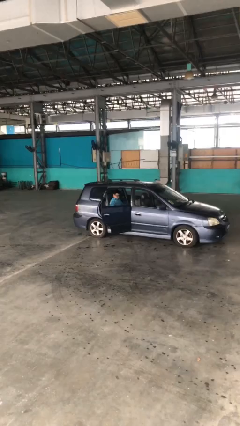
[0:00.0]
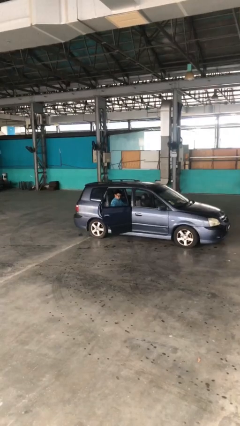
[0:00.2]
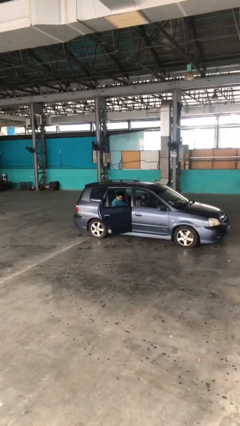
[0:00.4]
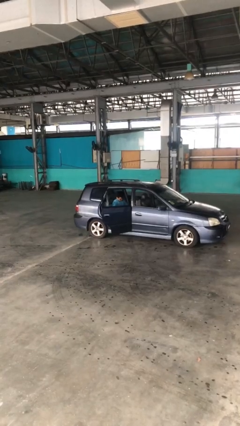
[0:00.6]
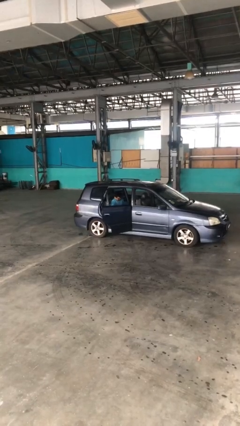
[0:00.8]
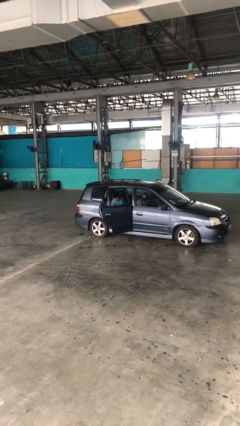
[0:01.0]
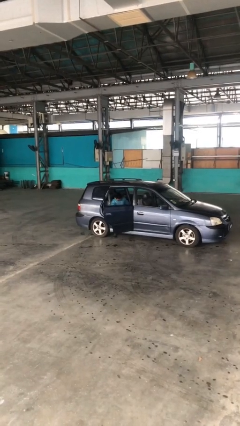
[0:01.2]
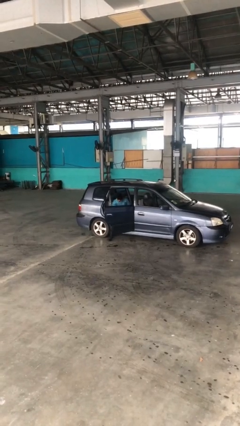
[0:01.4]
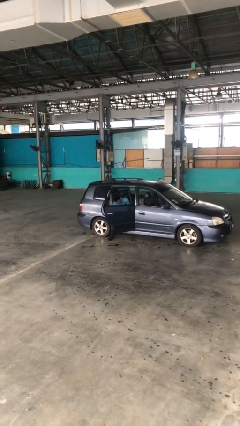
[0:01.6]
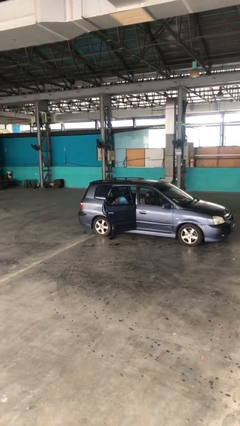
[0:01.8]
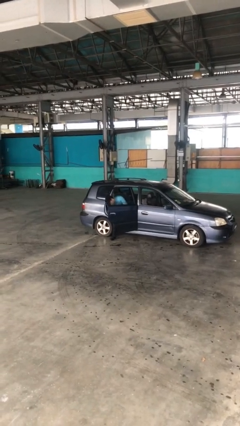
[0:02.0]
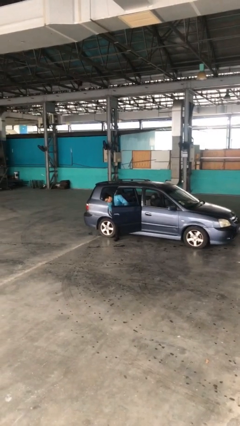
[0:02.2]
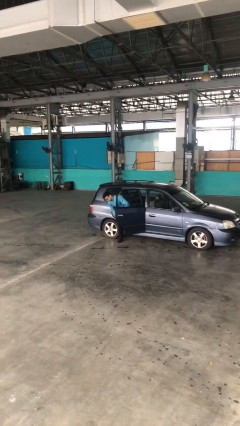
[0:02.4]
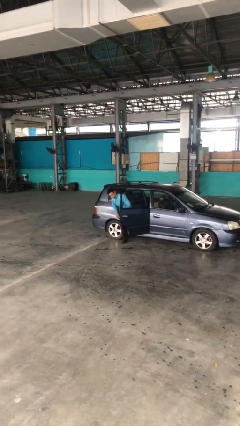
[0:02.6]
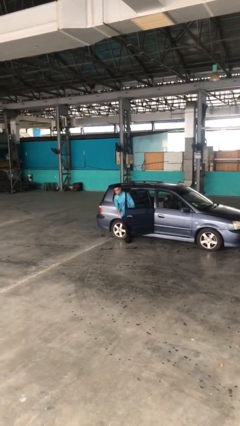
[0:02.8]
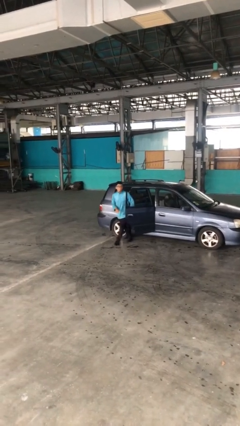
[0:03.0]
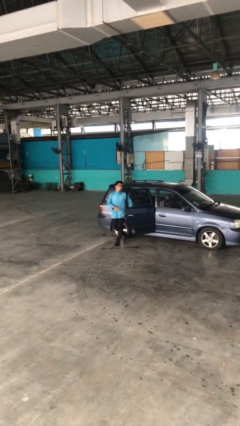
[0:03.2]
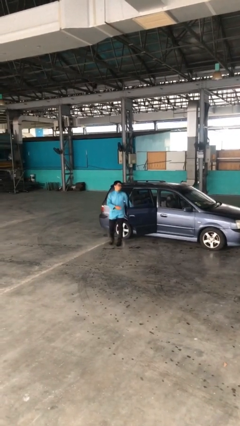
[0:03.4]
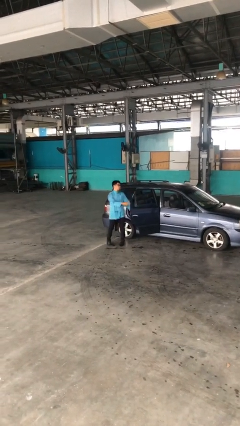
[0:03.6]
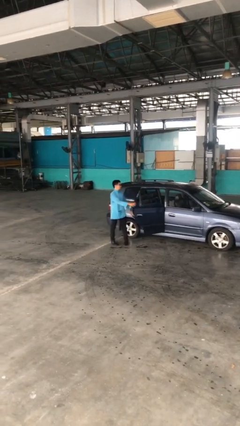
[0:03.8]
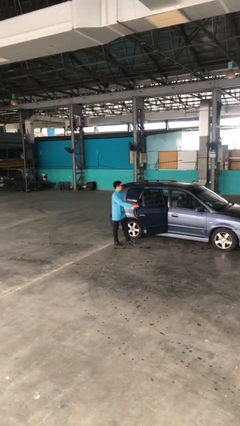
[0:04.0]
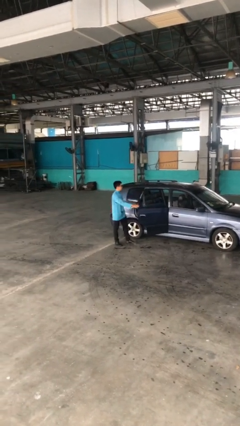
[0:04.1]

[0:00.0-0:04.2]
person exits car

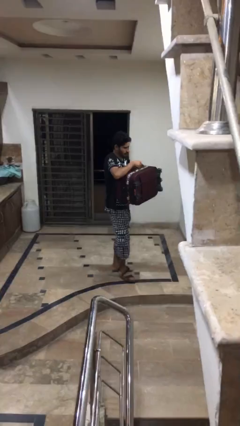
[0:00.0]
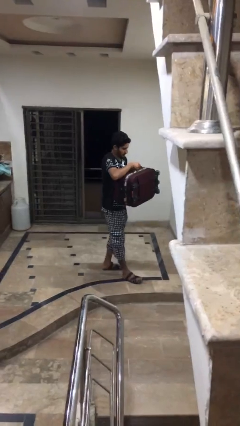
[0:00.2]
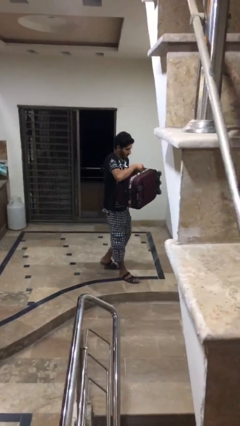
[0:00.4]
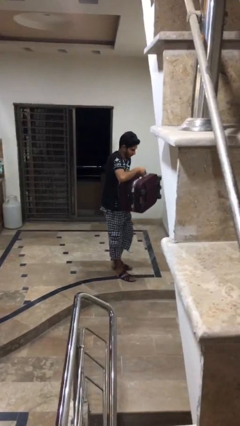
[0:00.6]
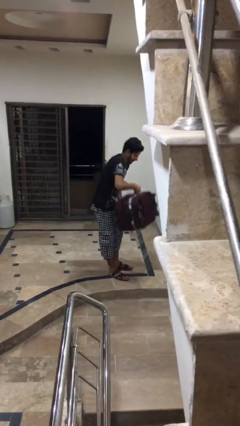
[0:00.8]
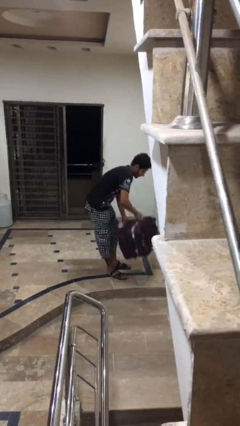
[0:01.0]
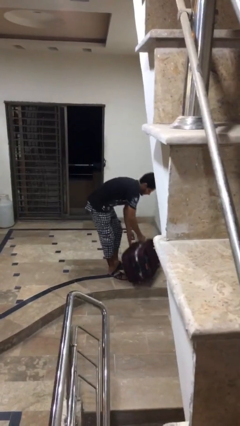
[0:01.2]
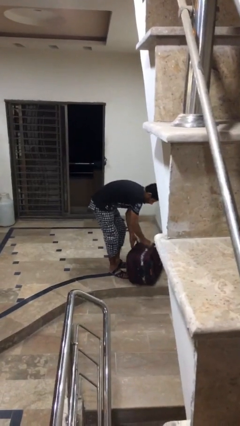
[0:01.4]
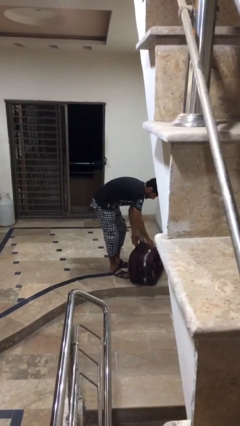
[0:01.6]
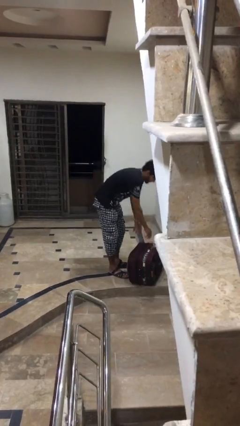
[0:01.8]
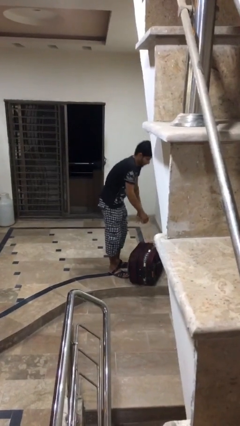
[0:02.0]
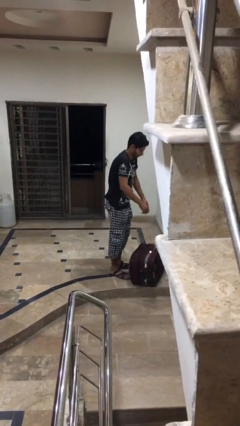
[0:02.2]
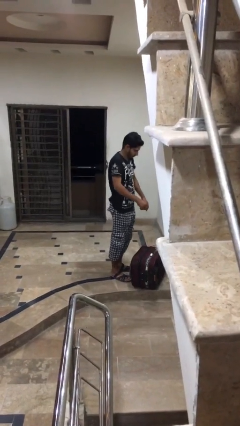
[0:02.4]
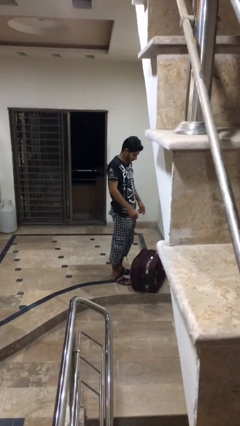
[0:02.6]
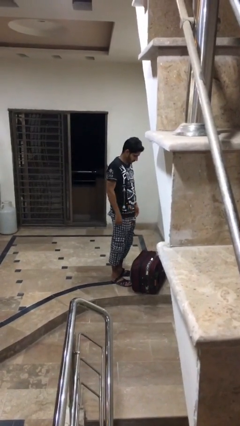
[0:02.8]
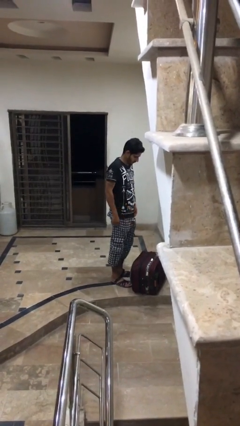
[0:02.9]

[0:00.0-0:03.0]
person puts down object on floor

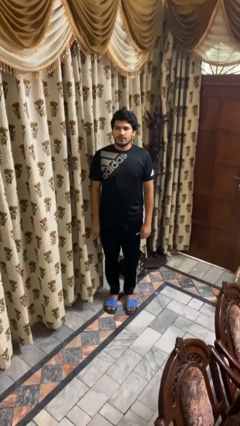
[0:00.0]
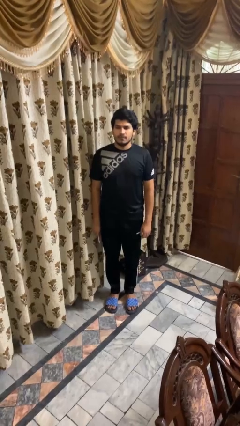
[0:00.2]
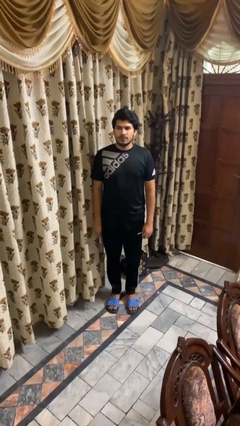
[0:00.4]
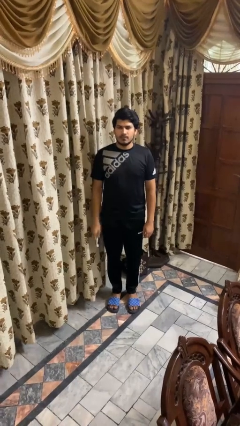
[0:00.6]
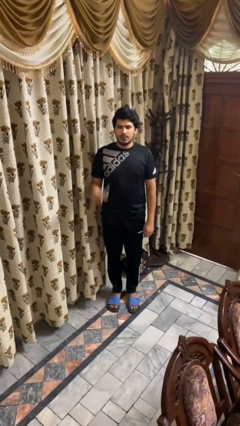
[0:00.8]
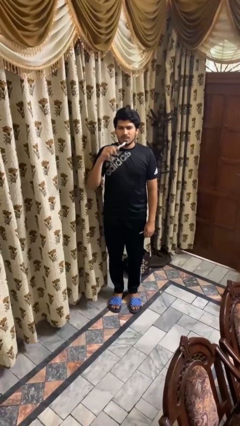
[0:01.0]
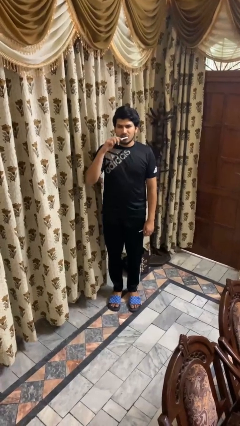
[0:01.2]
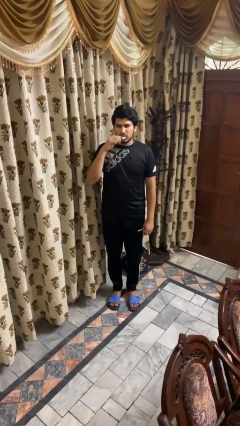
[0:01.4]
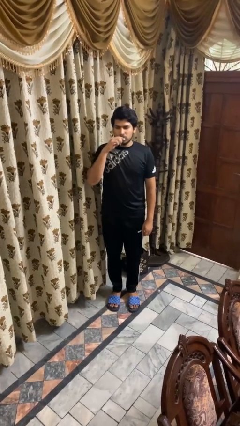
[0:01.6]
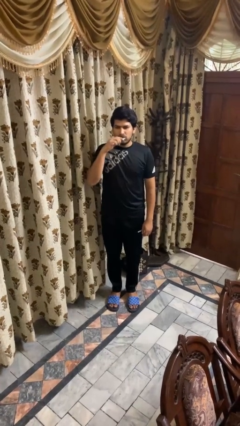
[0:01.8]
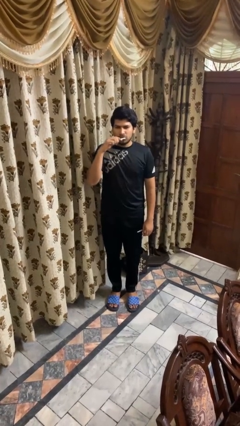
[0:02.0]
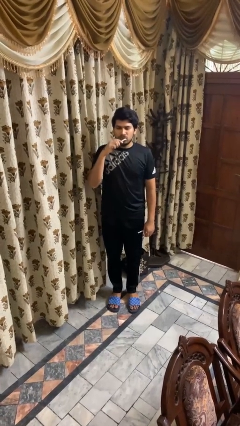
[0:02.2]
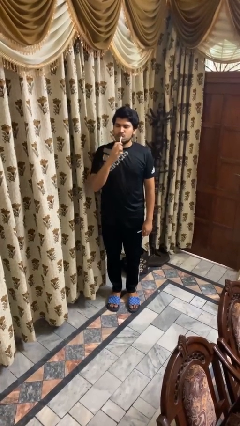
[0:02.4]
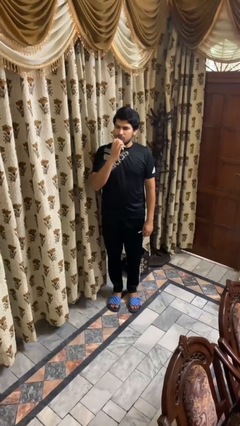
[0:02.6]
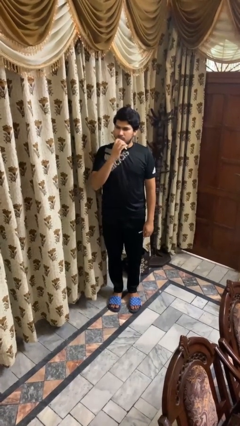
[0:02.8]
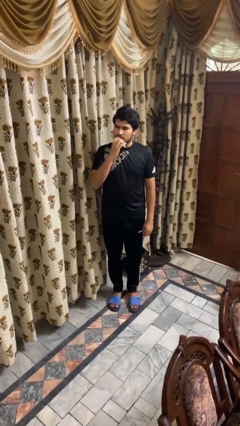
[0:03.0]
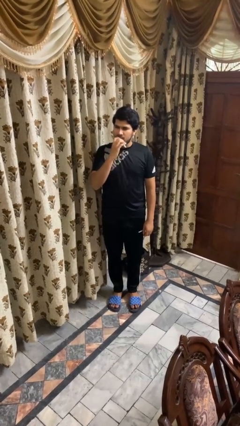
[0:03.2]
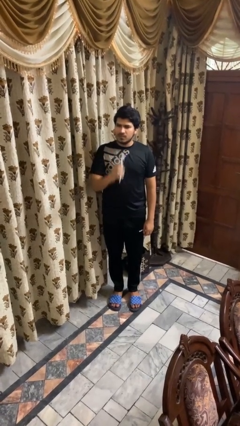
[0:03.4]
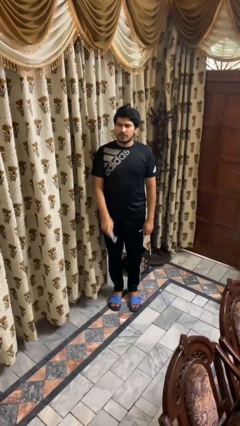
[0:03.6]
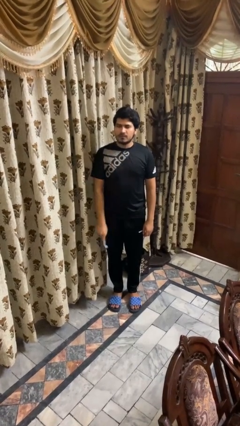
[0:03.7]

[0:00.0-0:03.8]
person brushes teeth

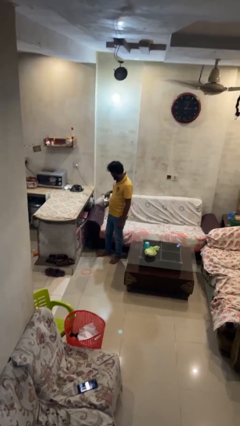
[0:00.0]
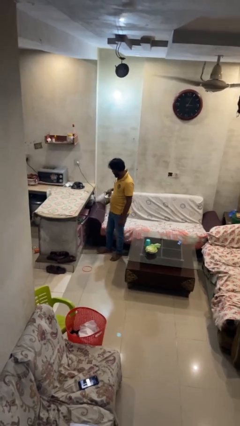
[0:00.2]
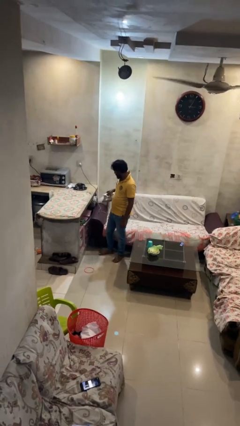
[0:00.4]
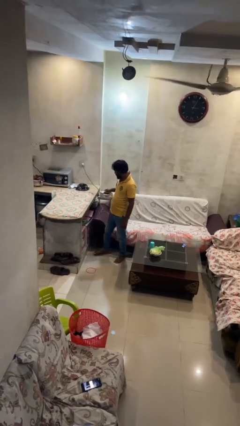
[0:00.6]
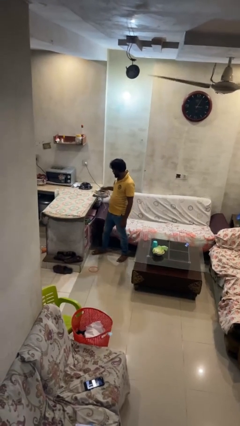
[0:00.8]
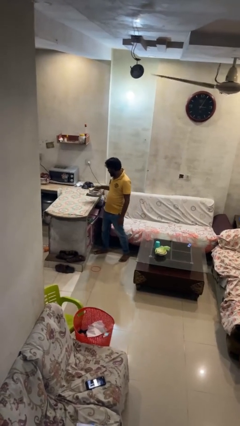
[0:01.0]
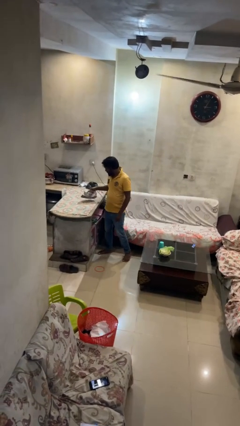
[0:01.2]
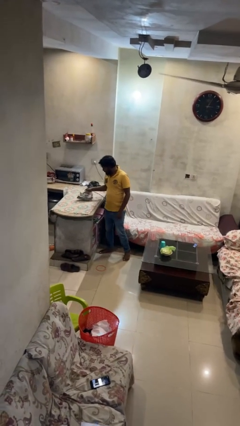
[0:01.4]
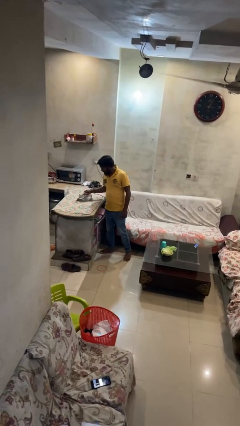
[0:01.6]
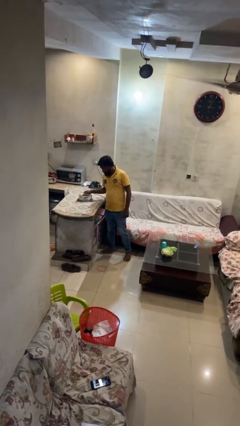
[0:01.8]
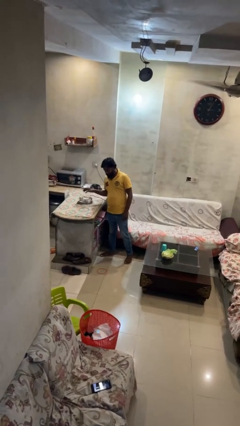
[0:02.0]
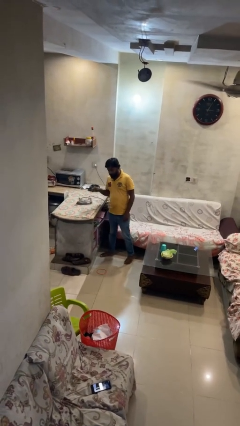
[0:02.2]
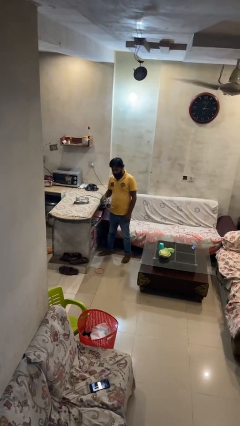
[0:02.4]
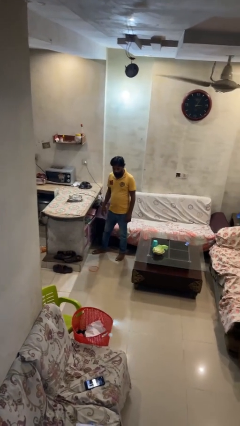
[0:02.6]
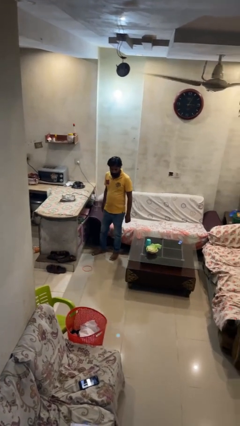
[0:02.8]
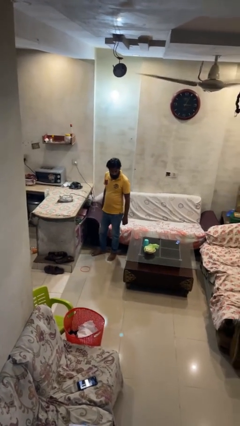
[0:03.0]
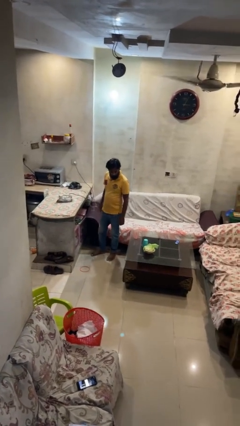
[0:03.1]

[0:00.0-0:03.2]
person puts down object on countertop

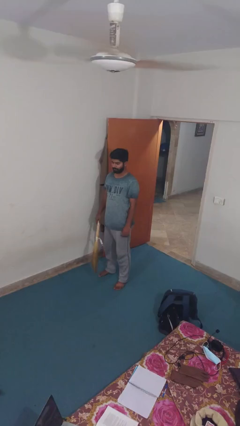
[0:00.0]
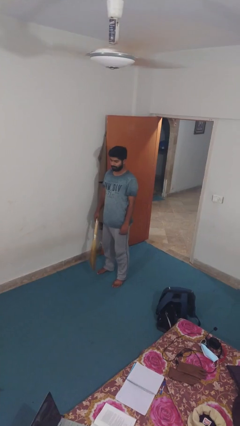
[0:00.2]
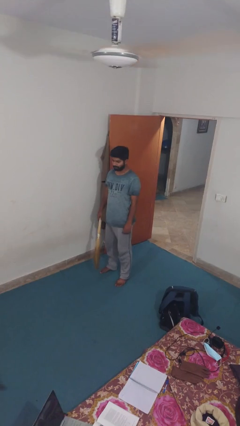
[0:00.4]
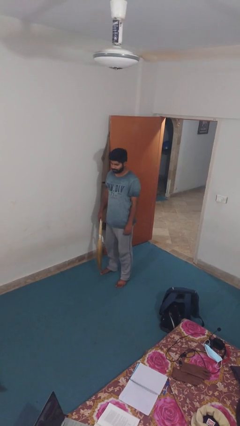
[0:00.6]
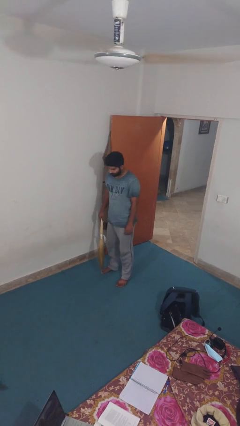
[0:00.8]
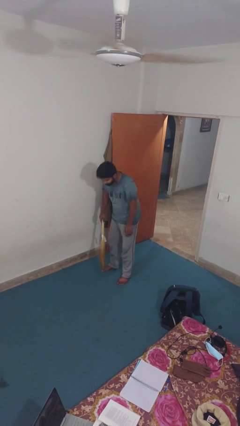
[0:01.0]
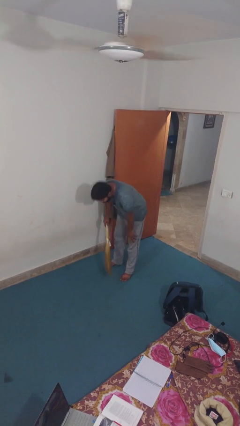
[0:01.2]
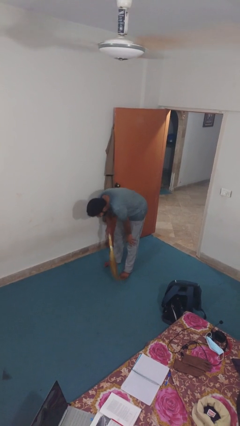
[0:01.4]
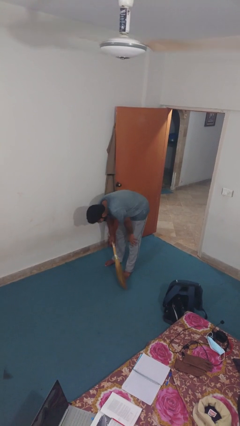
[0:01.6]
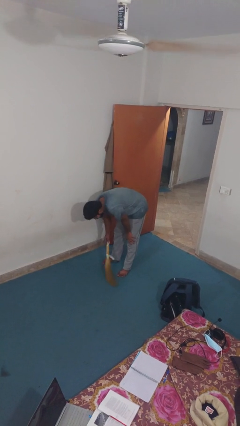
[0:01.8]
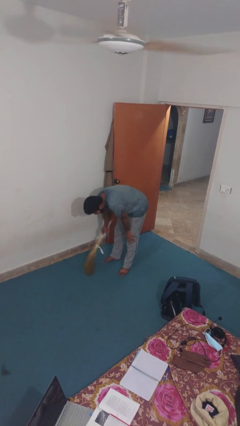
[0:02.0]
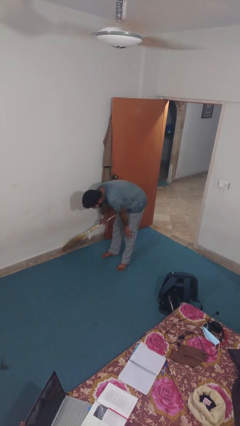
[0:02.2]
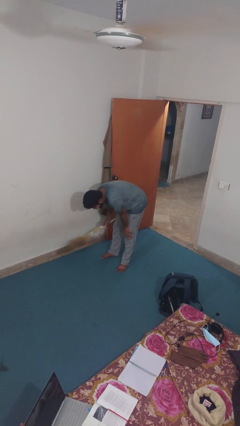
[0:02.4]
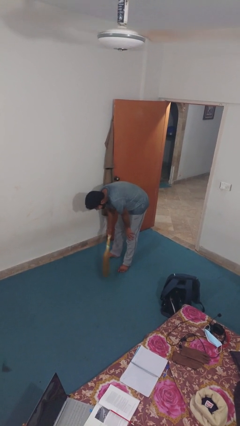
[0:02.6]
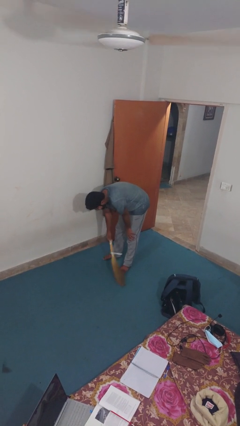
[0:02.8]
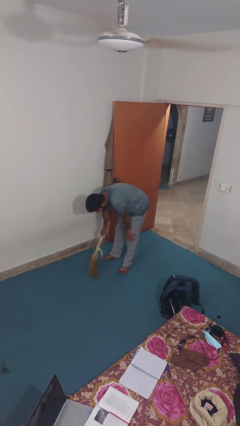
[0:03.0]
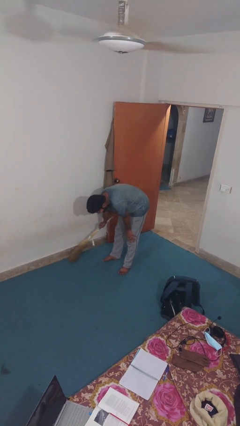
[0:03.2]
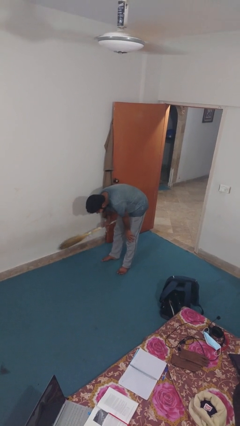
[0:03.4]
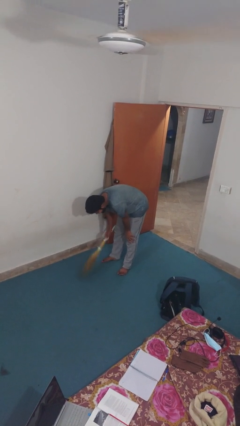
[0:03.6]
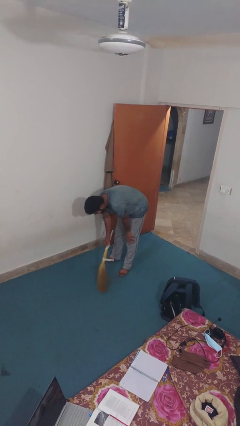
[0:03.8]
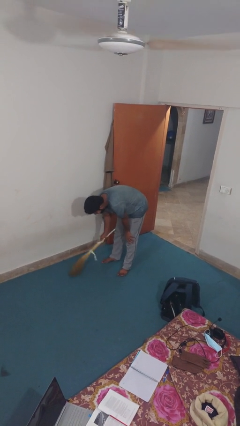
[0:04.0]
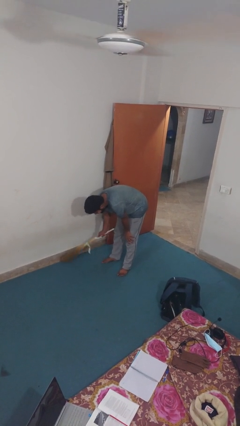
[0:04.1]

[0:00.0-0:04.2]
person sweeps floor
